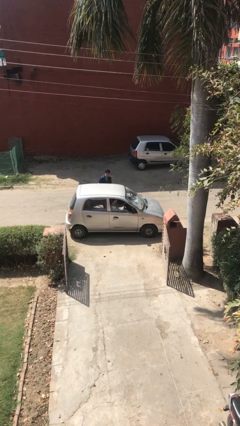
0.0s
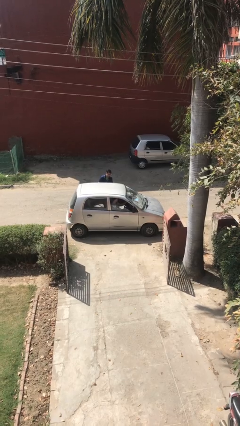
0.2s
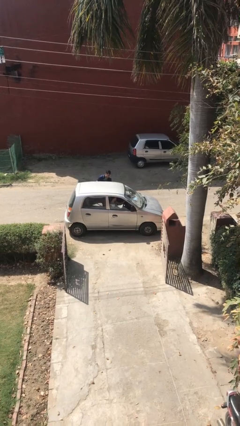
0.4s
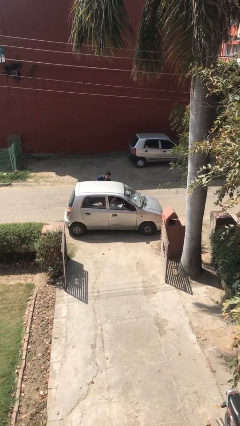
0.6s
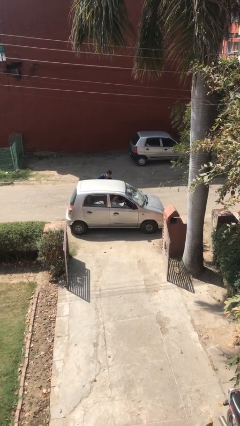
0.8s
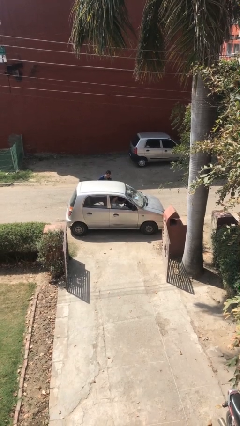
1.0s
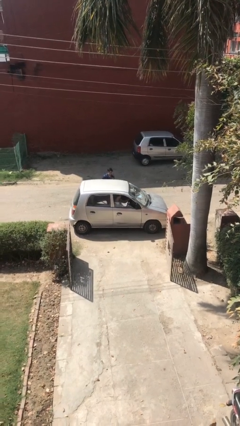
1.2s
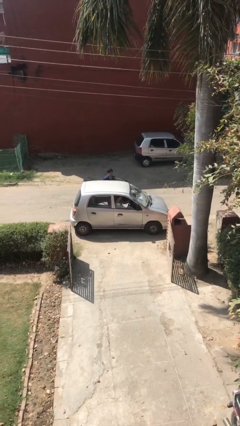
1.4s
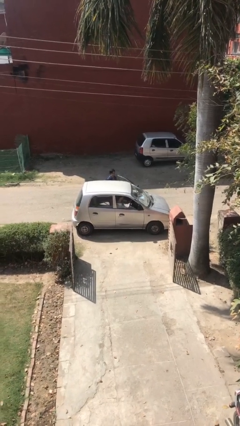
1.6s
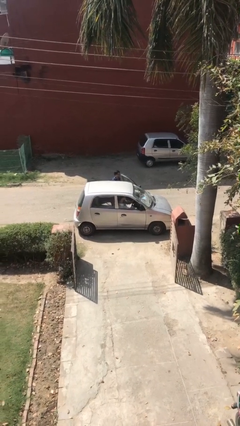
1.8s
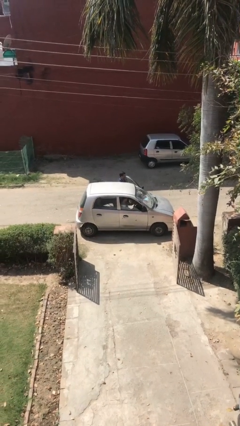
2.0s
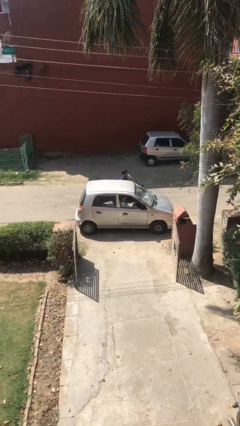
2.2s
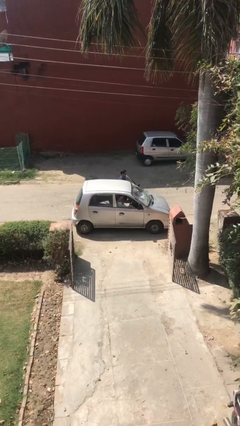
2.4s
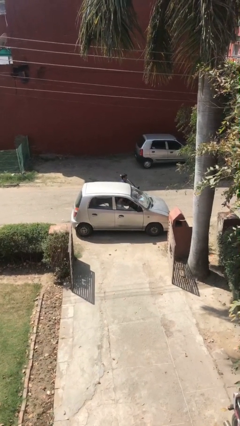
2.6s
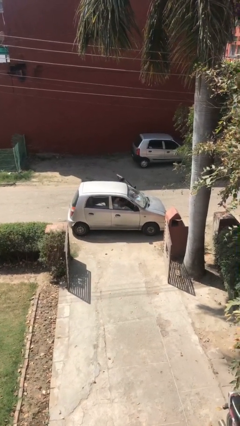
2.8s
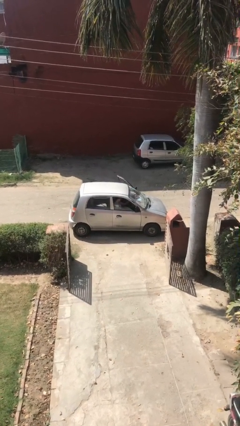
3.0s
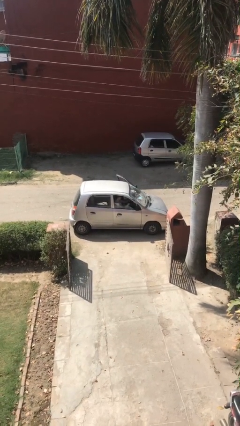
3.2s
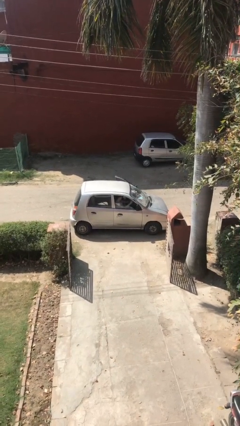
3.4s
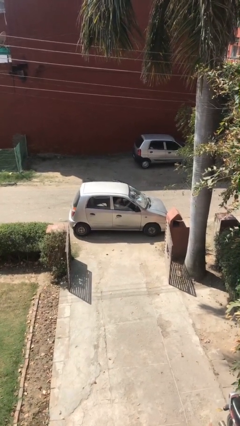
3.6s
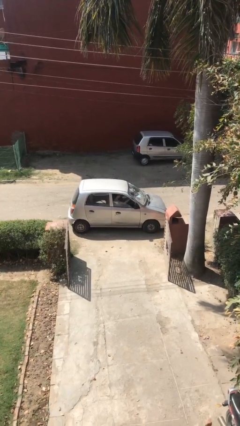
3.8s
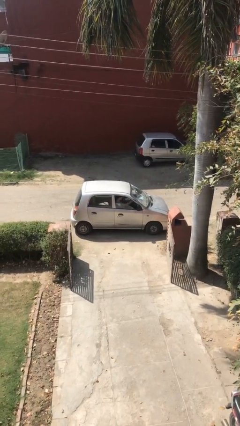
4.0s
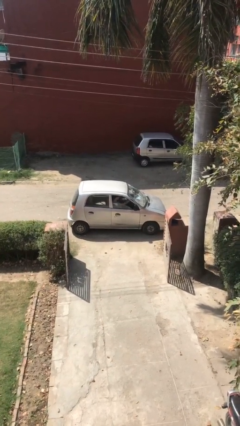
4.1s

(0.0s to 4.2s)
car picks up person

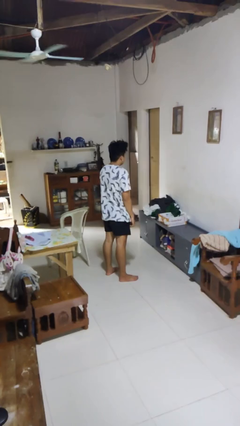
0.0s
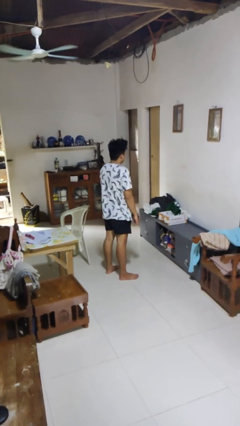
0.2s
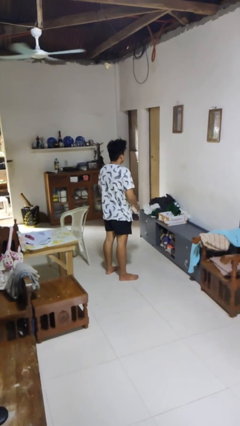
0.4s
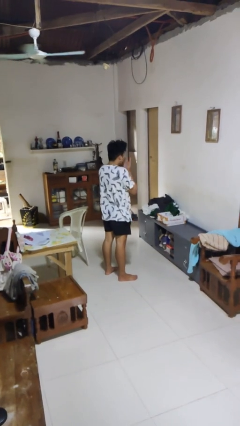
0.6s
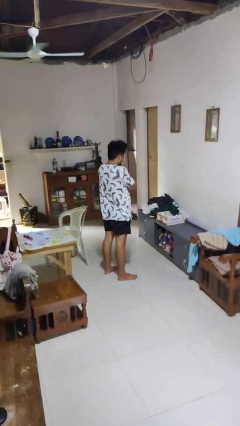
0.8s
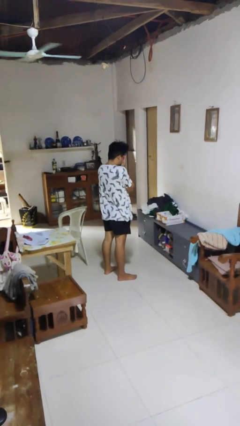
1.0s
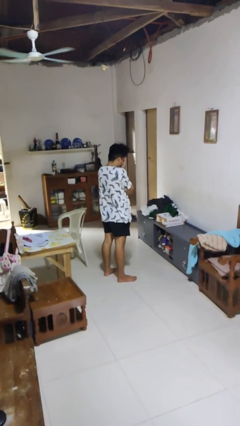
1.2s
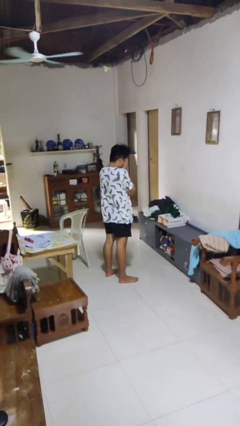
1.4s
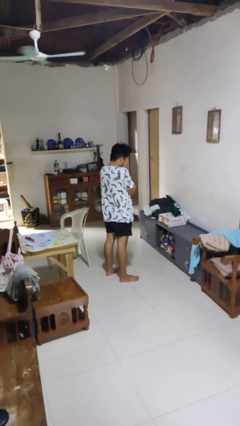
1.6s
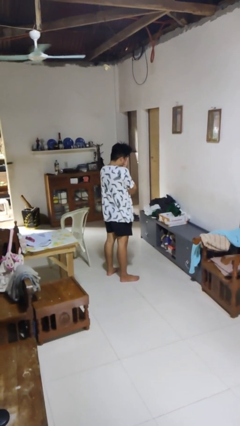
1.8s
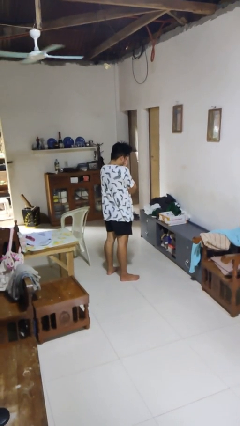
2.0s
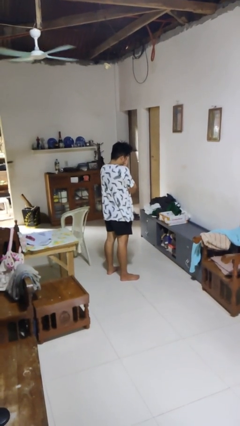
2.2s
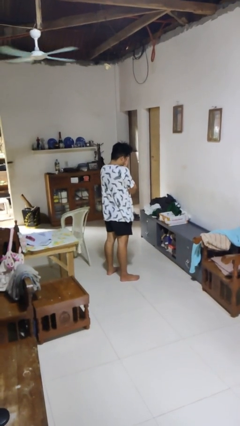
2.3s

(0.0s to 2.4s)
person covers face with hands

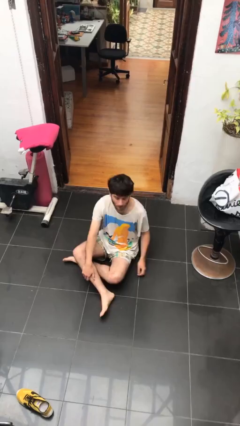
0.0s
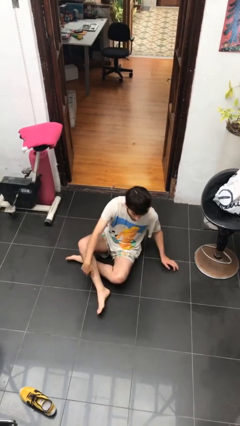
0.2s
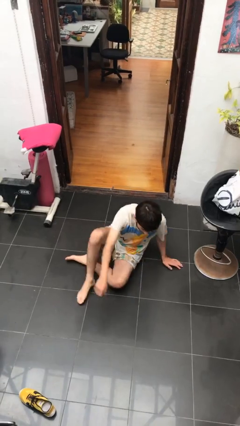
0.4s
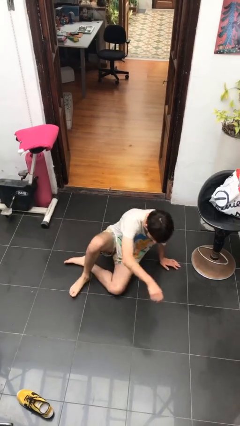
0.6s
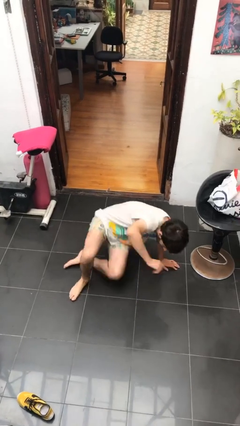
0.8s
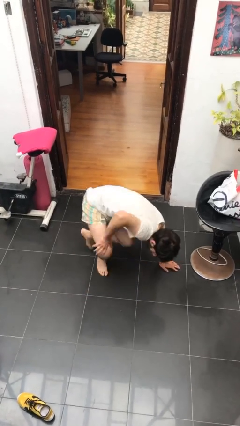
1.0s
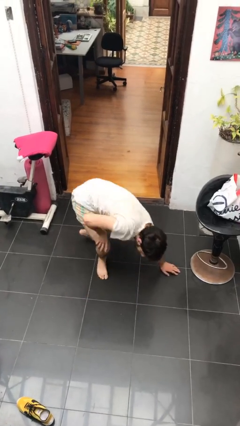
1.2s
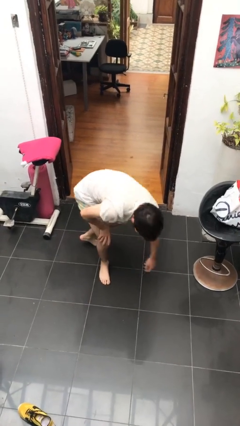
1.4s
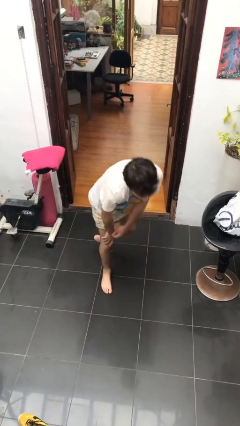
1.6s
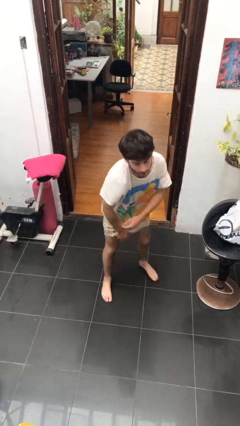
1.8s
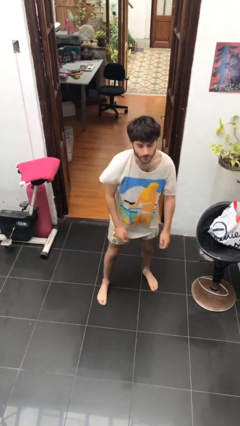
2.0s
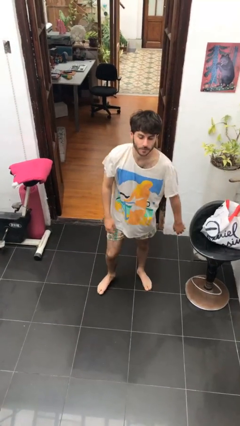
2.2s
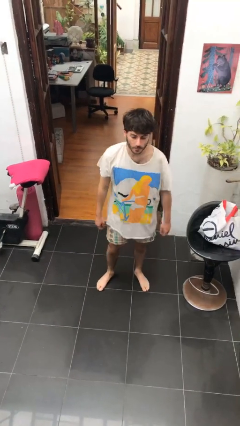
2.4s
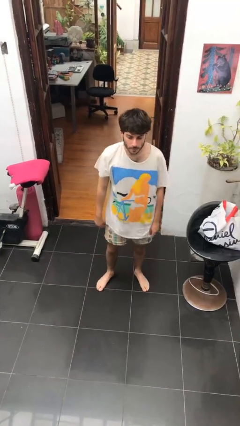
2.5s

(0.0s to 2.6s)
person stands up

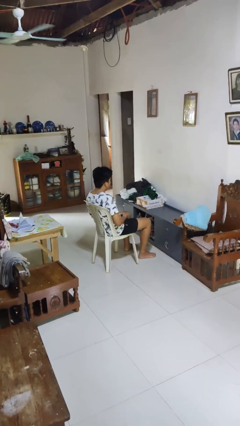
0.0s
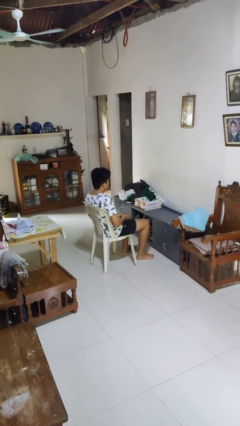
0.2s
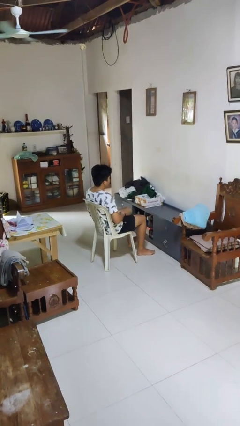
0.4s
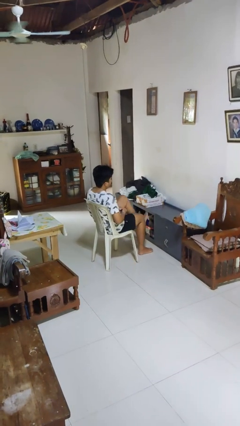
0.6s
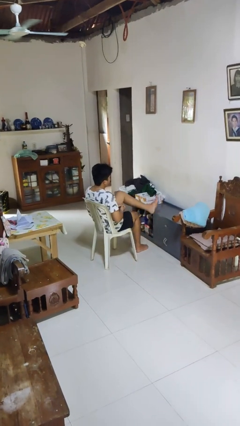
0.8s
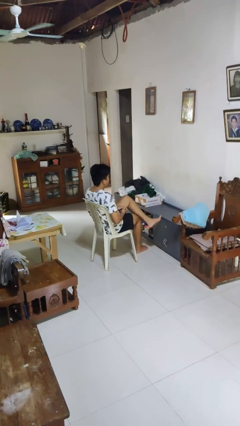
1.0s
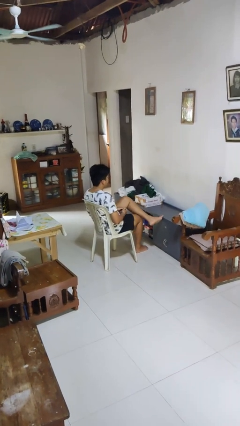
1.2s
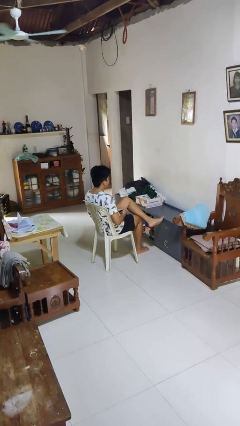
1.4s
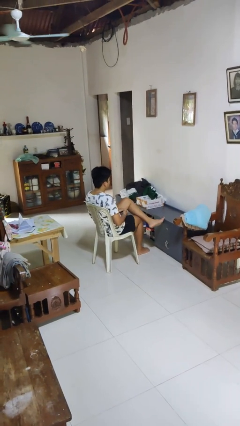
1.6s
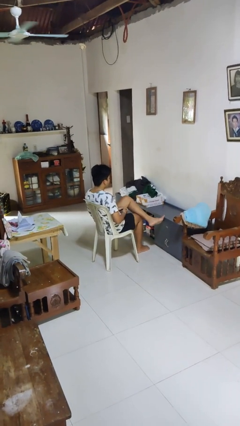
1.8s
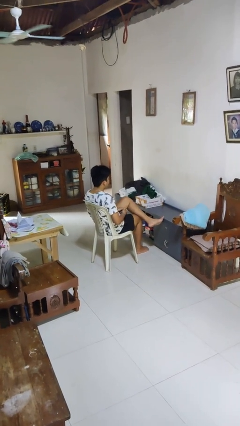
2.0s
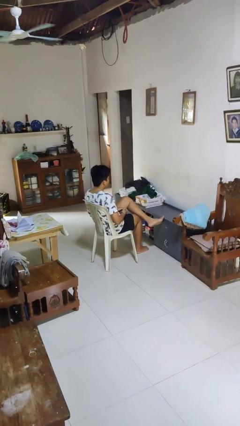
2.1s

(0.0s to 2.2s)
person crosses legs

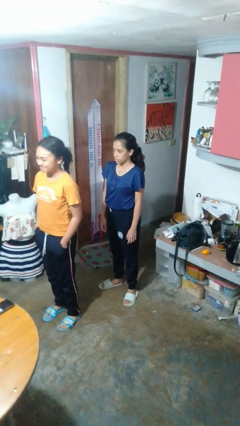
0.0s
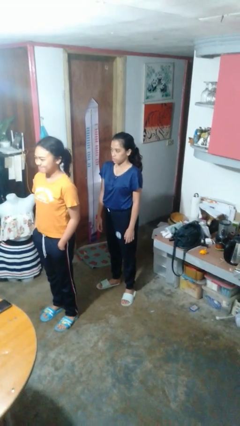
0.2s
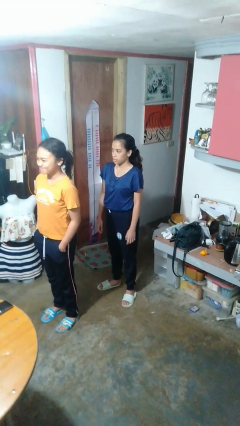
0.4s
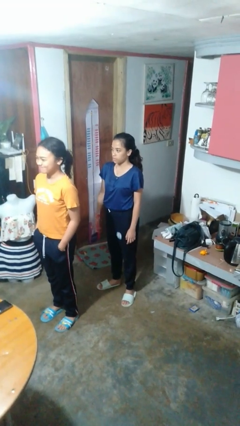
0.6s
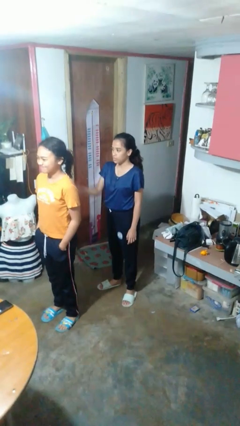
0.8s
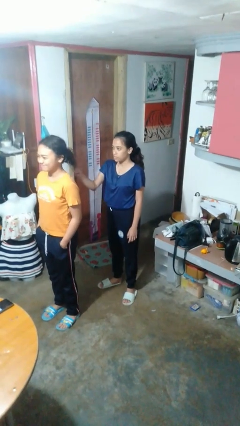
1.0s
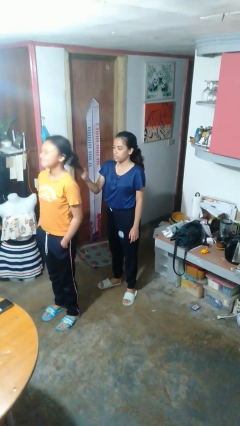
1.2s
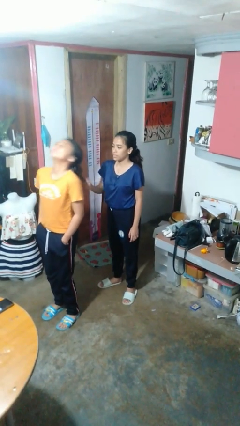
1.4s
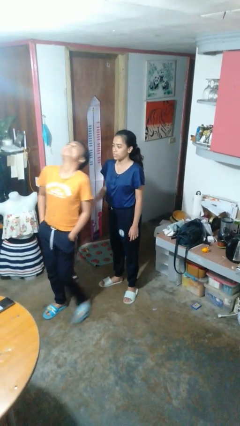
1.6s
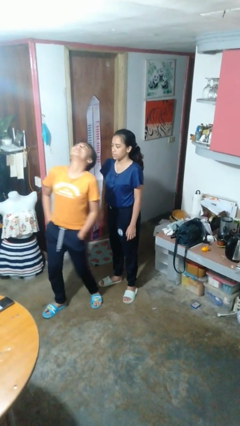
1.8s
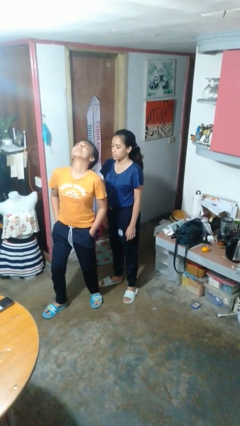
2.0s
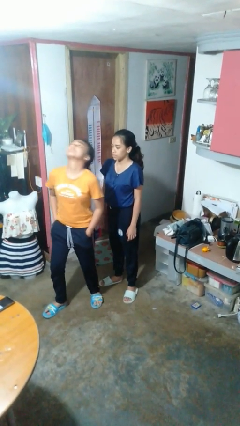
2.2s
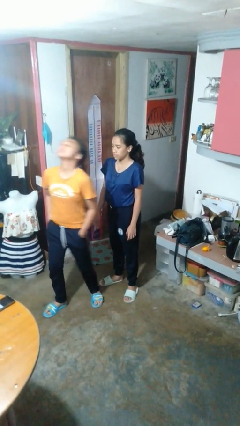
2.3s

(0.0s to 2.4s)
person grabs person by hair

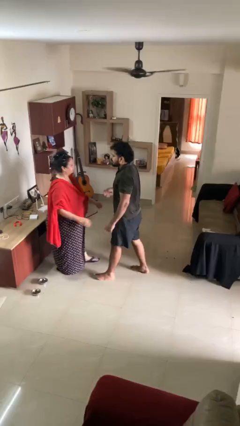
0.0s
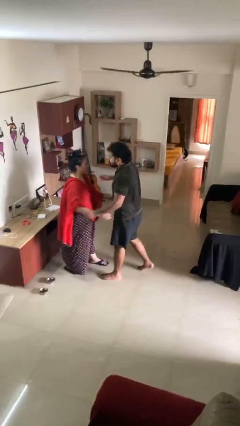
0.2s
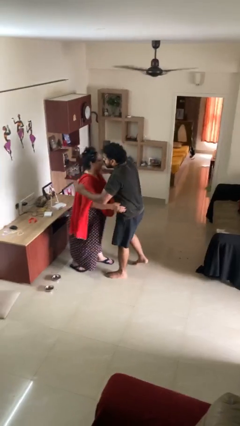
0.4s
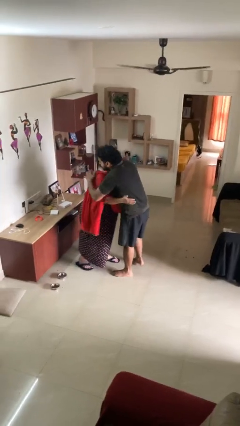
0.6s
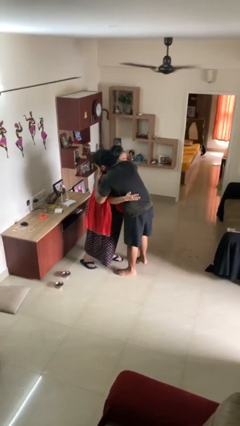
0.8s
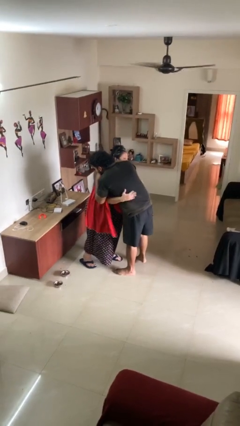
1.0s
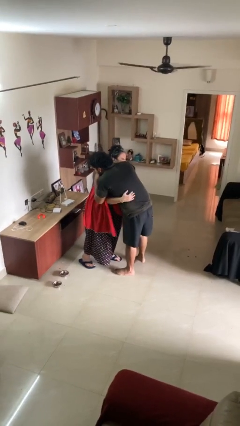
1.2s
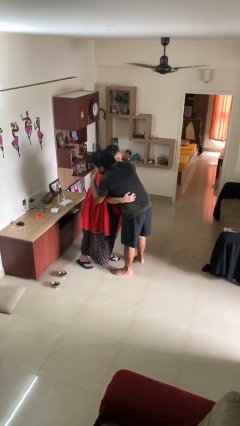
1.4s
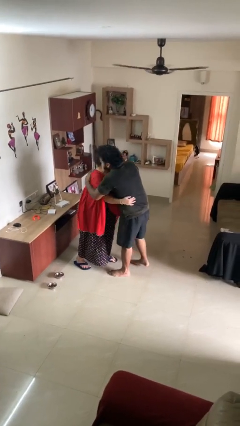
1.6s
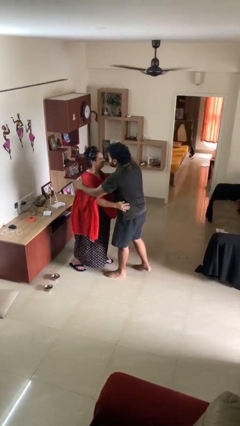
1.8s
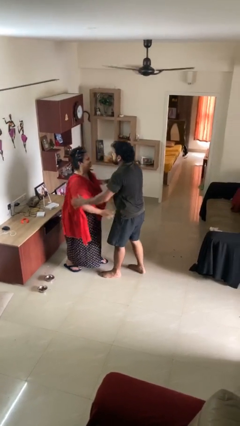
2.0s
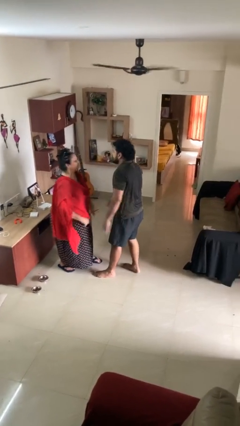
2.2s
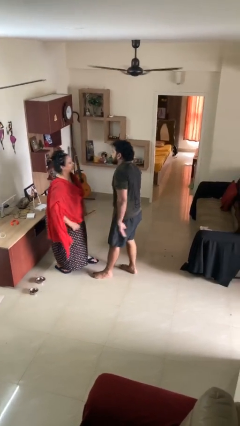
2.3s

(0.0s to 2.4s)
person embraces person

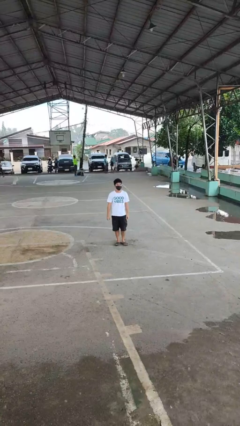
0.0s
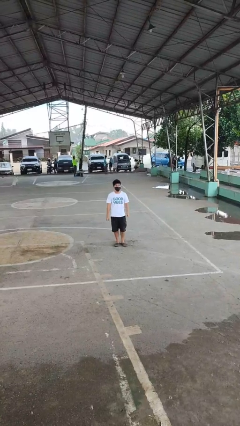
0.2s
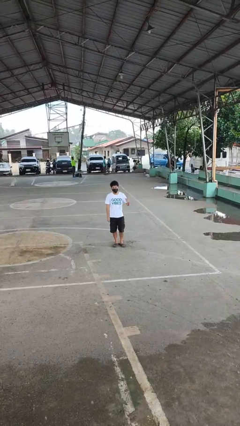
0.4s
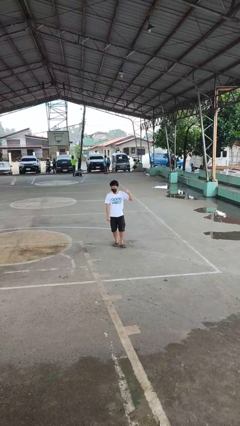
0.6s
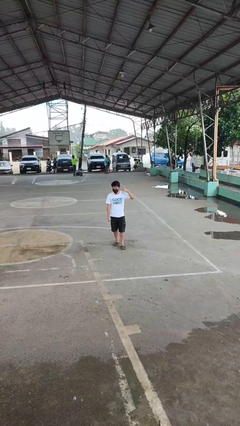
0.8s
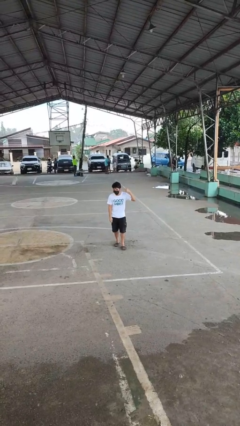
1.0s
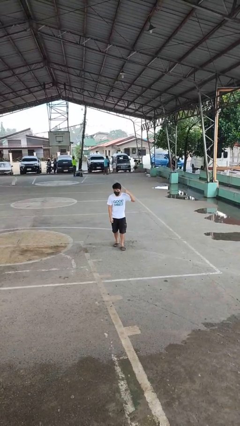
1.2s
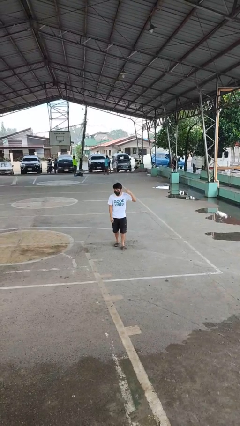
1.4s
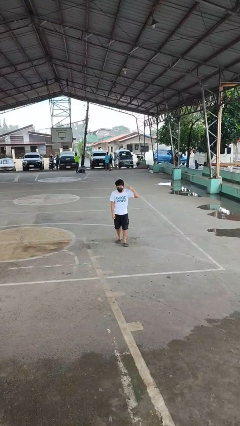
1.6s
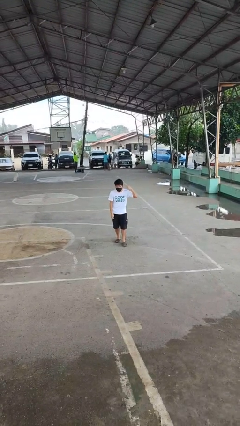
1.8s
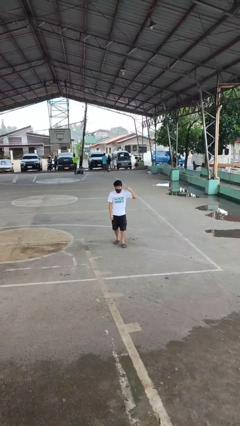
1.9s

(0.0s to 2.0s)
person gestures listen closely
